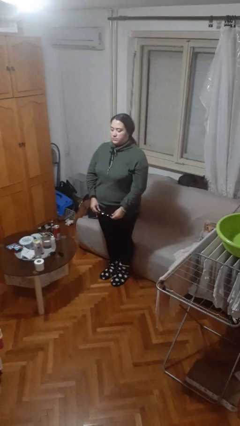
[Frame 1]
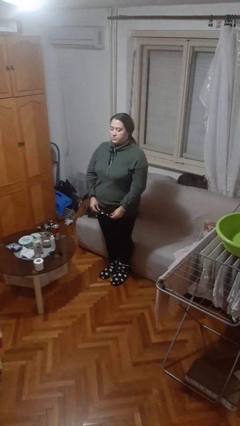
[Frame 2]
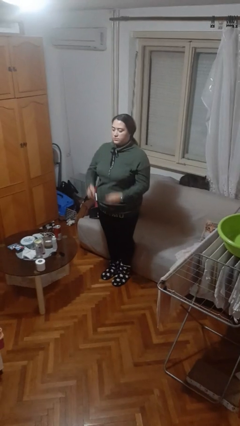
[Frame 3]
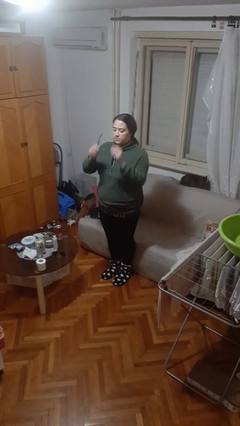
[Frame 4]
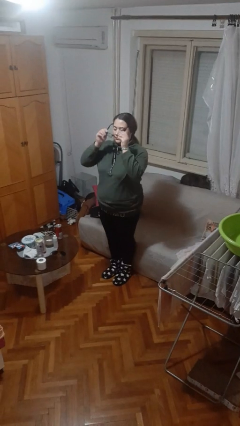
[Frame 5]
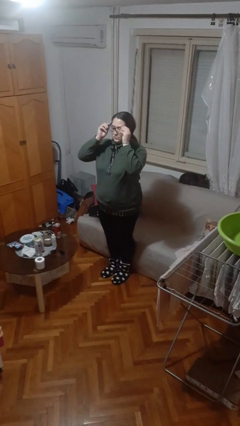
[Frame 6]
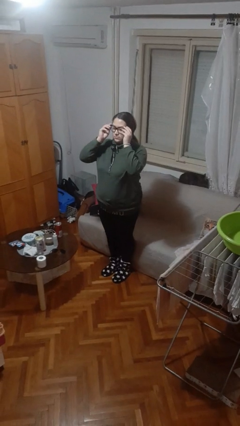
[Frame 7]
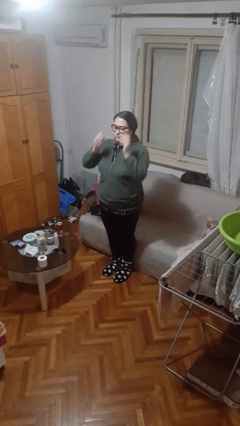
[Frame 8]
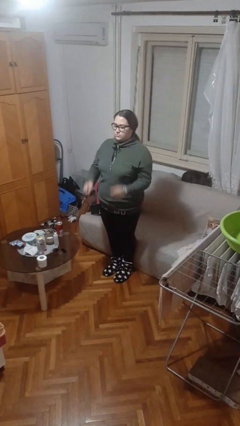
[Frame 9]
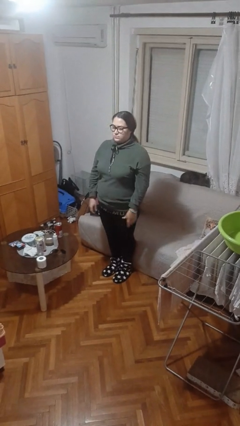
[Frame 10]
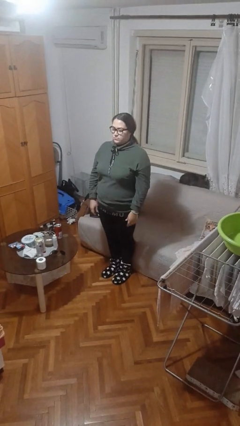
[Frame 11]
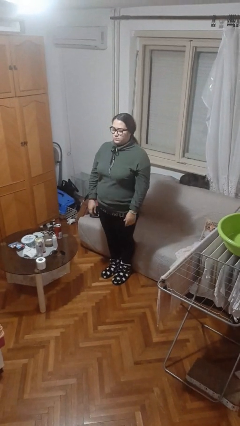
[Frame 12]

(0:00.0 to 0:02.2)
person puts on glasses

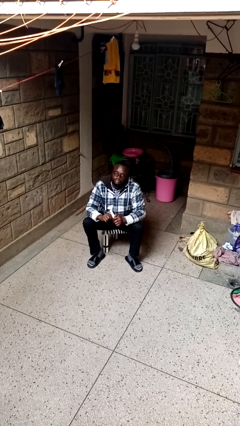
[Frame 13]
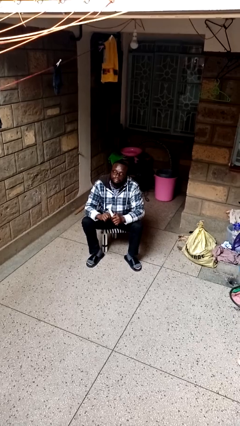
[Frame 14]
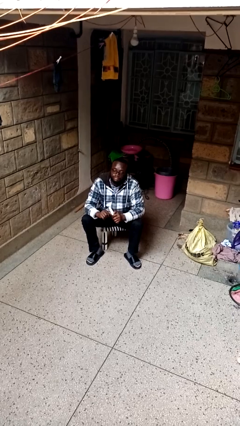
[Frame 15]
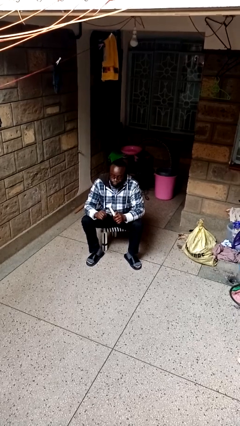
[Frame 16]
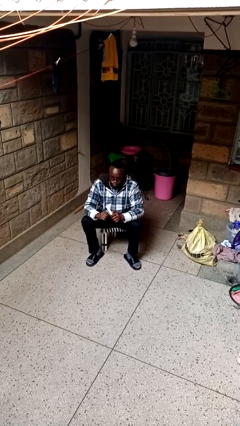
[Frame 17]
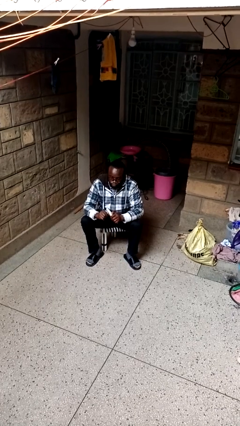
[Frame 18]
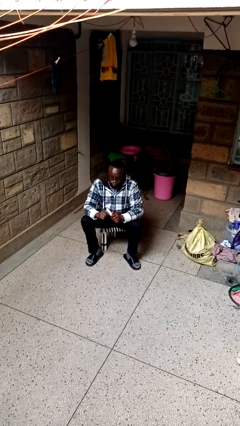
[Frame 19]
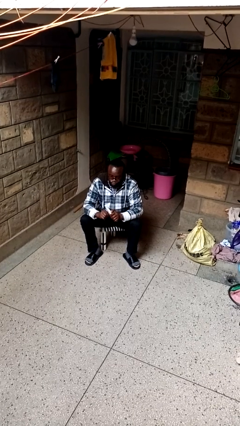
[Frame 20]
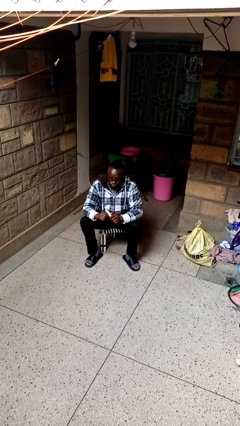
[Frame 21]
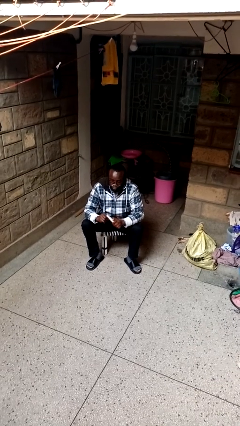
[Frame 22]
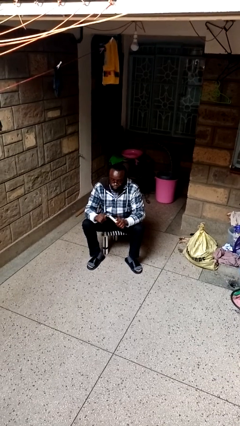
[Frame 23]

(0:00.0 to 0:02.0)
person files fingernails

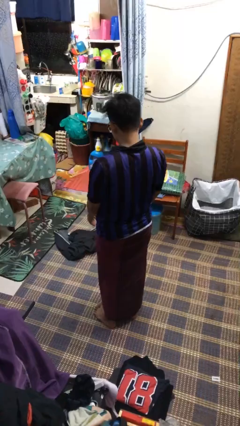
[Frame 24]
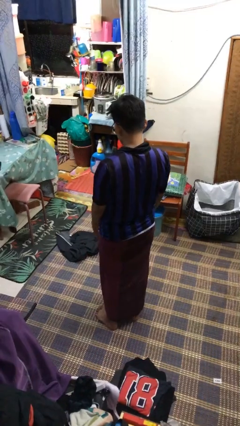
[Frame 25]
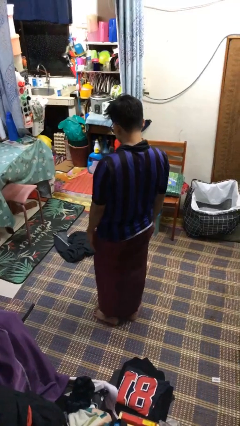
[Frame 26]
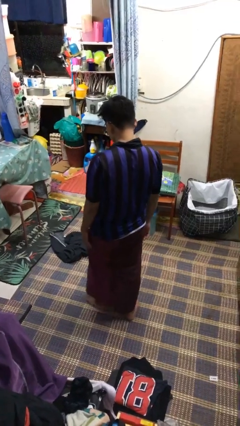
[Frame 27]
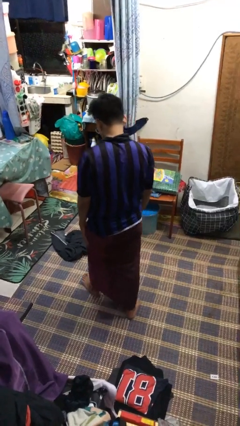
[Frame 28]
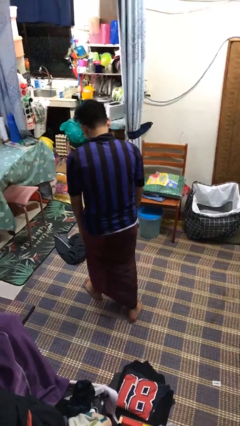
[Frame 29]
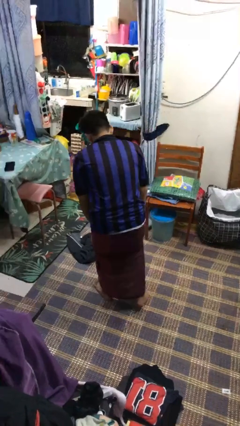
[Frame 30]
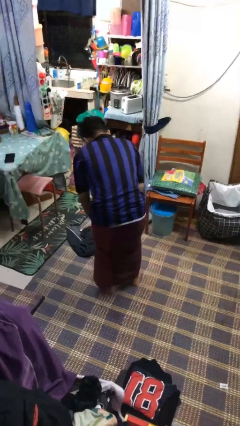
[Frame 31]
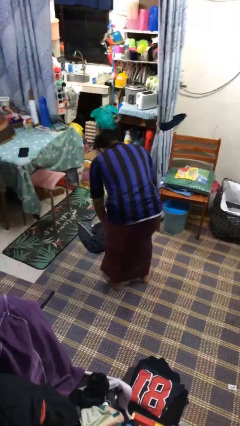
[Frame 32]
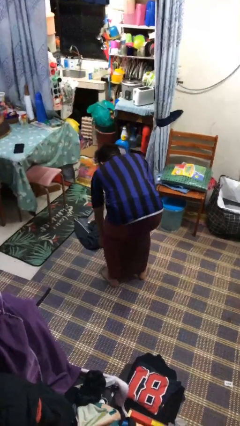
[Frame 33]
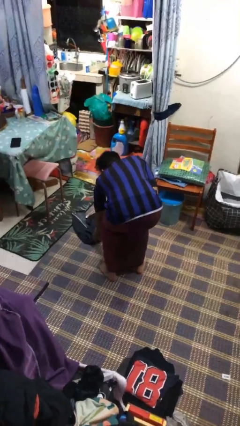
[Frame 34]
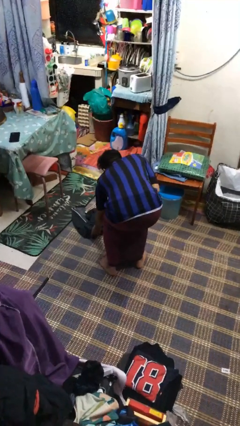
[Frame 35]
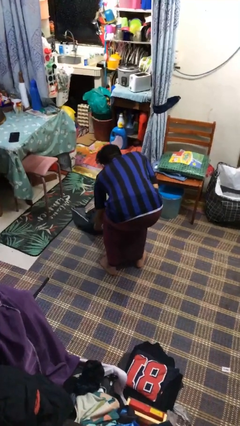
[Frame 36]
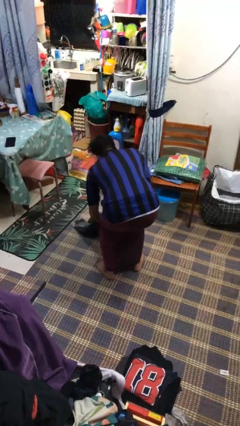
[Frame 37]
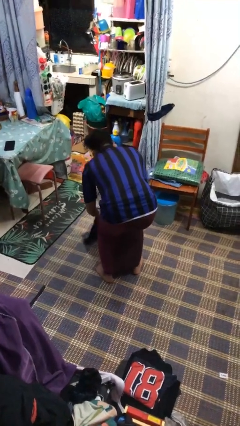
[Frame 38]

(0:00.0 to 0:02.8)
person picks up object from floor

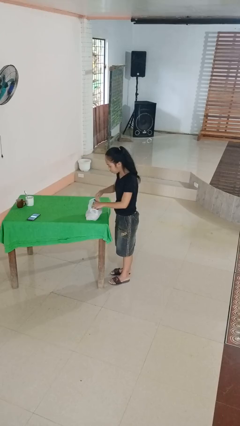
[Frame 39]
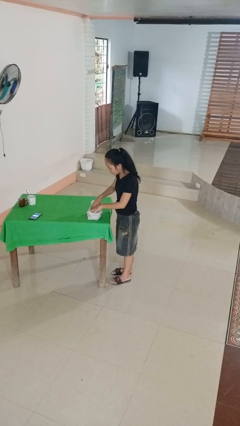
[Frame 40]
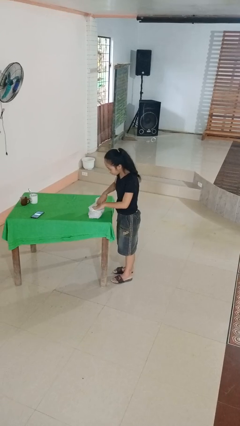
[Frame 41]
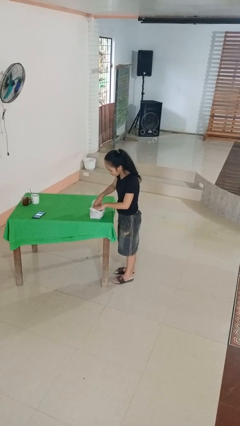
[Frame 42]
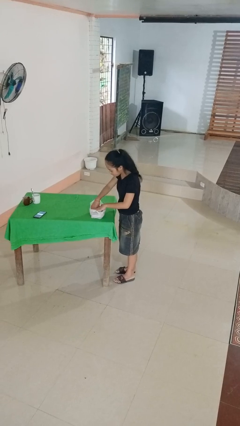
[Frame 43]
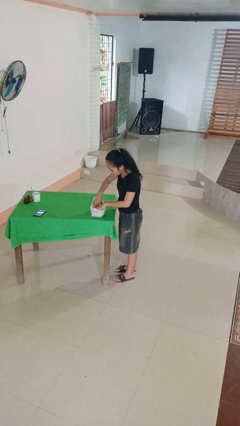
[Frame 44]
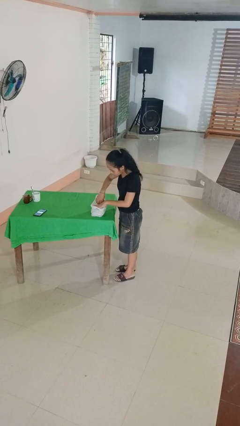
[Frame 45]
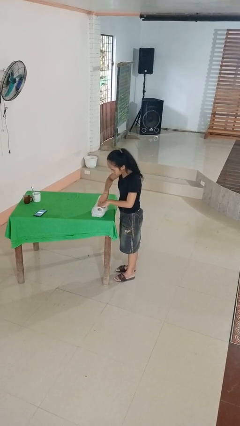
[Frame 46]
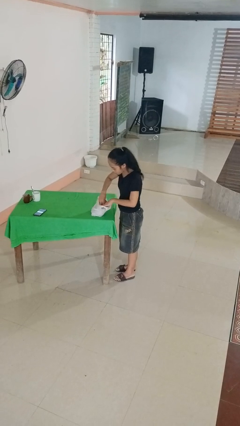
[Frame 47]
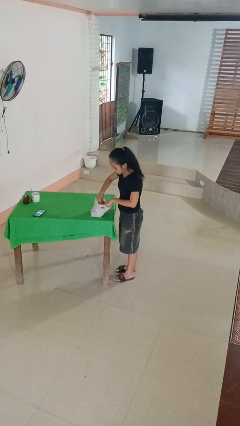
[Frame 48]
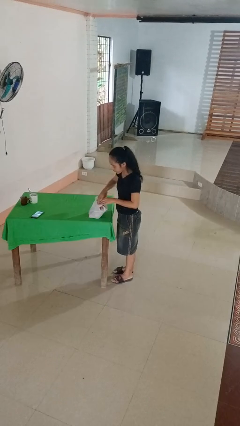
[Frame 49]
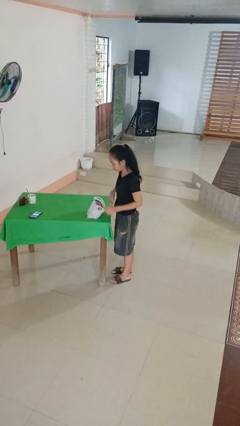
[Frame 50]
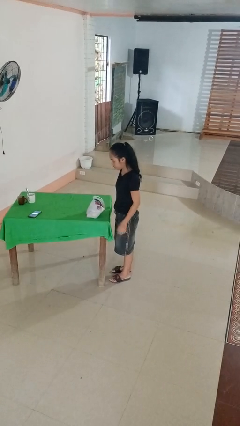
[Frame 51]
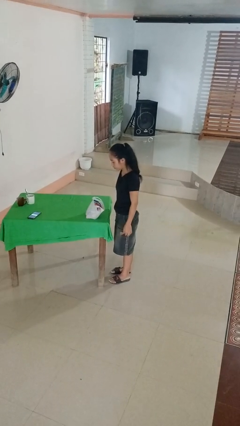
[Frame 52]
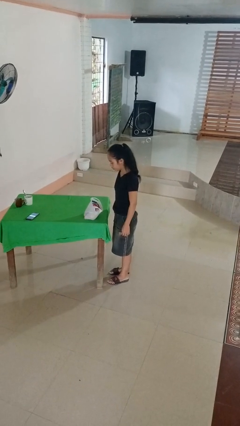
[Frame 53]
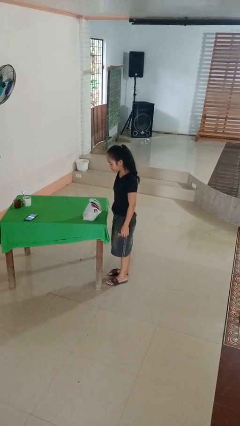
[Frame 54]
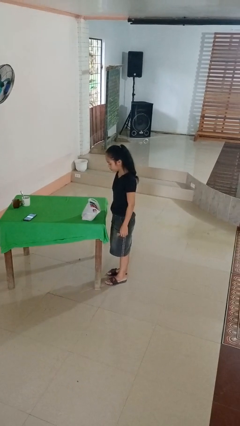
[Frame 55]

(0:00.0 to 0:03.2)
person searches in bag

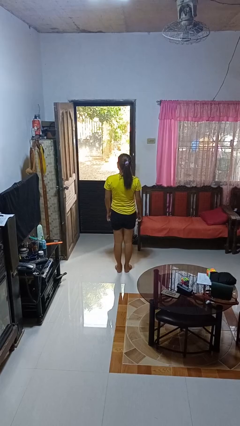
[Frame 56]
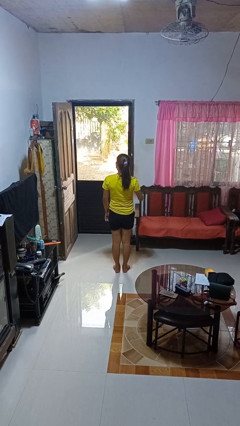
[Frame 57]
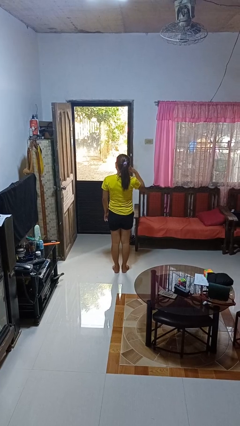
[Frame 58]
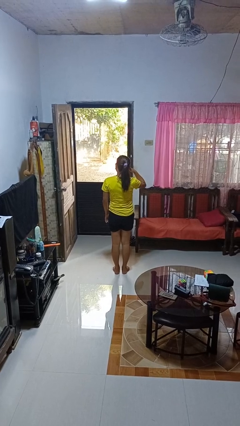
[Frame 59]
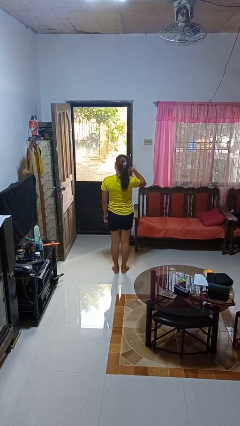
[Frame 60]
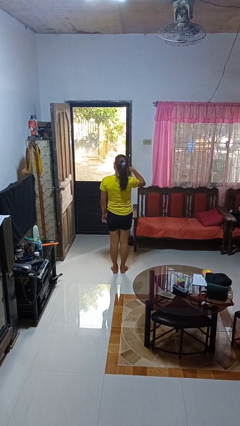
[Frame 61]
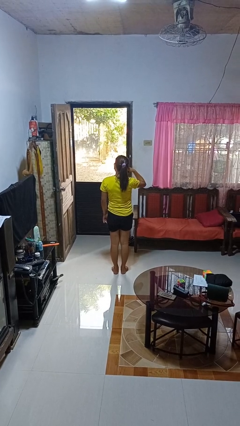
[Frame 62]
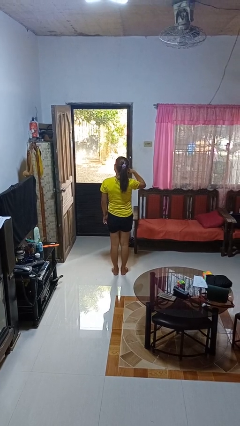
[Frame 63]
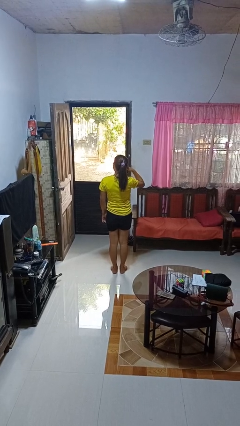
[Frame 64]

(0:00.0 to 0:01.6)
person gestures call me

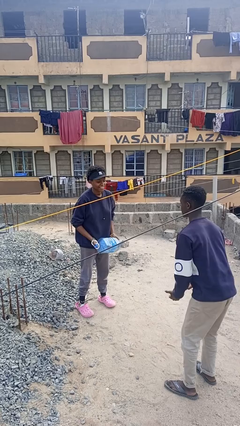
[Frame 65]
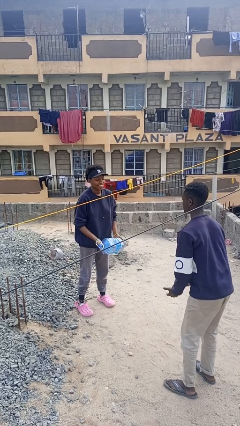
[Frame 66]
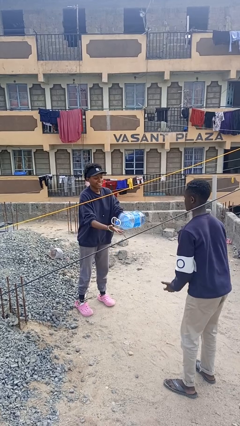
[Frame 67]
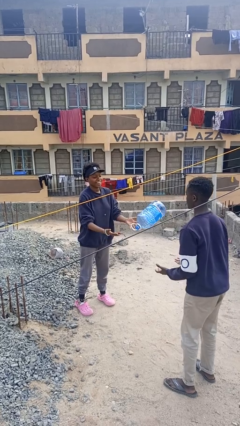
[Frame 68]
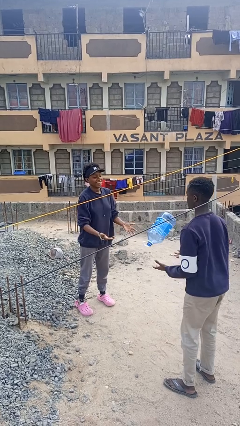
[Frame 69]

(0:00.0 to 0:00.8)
person catches object from person

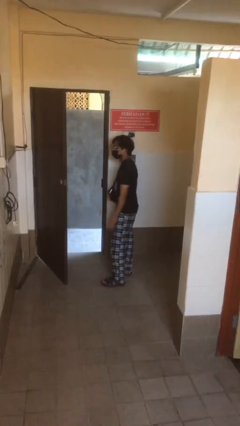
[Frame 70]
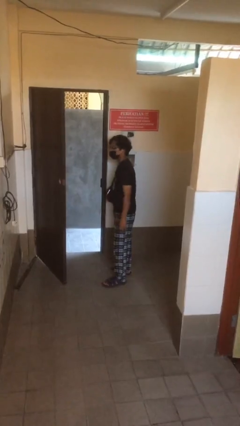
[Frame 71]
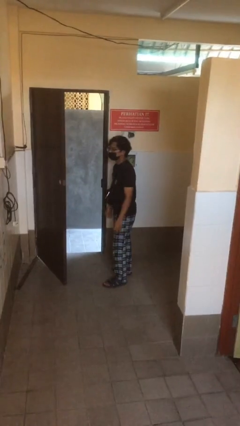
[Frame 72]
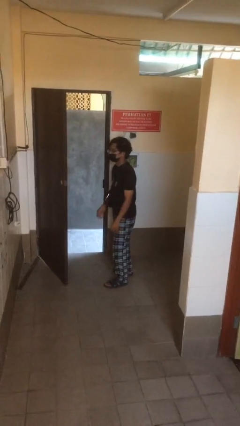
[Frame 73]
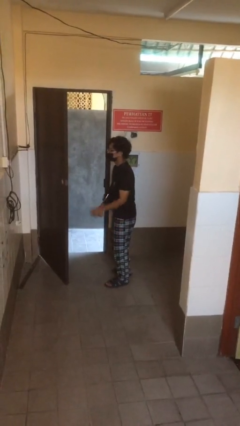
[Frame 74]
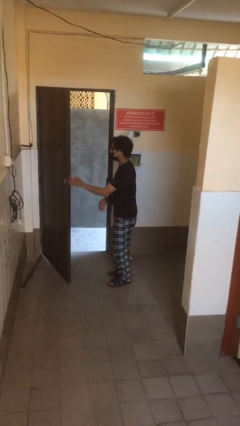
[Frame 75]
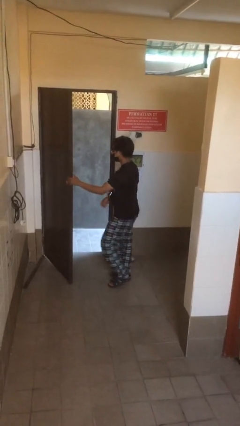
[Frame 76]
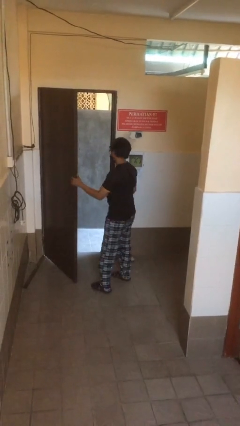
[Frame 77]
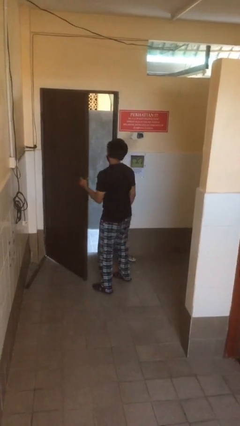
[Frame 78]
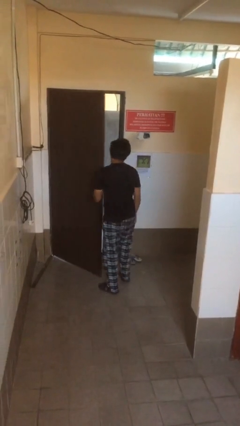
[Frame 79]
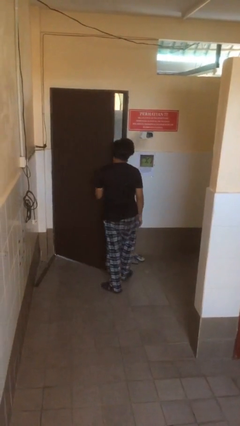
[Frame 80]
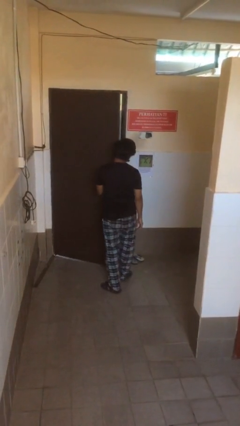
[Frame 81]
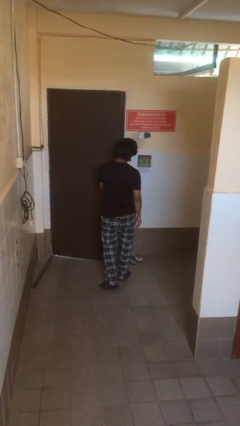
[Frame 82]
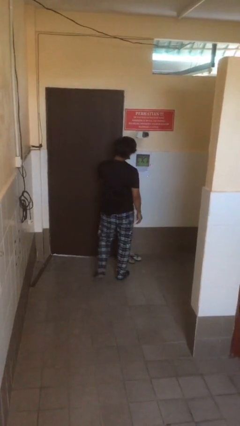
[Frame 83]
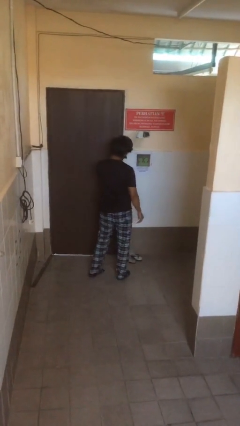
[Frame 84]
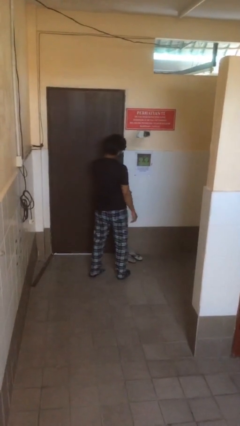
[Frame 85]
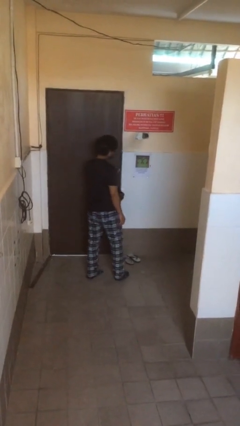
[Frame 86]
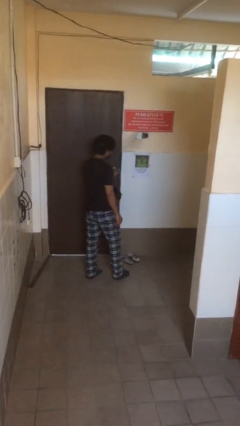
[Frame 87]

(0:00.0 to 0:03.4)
person closes facility door

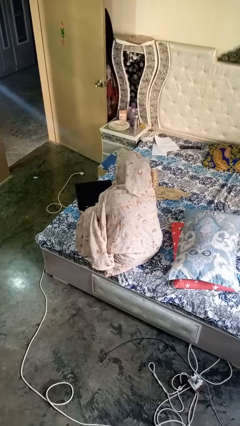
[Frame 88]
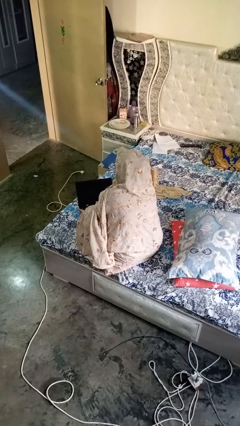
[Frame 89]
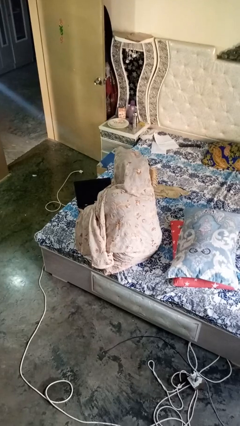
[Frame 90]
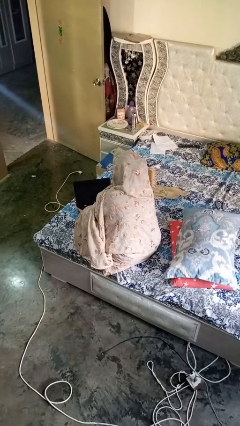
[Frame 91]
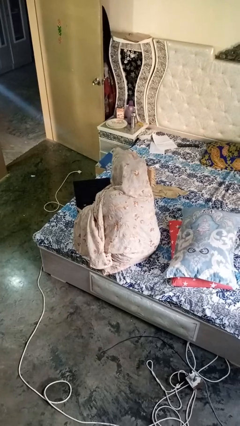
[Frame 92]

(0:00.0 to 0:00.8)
person opens laptop
